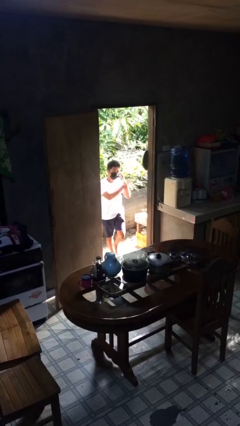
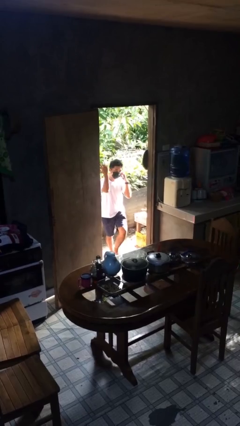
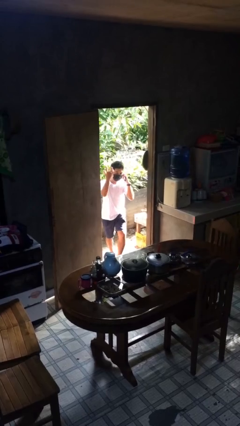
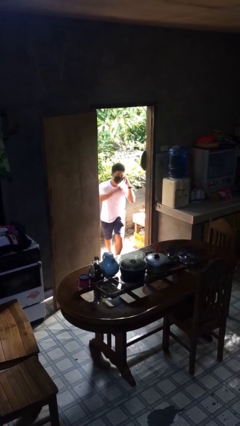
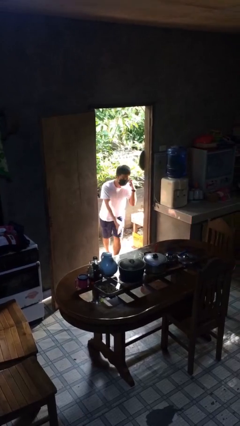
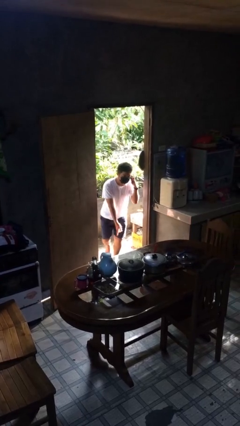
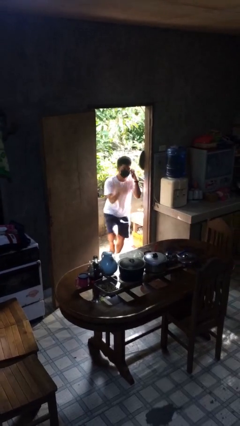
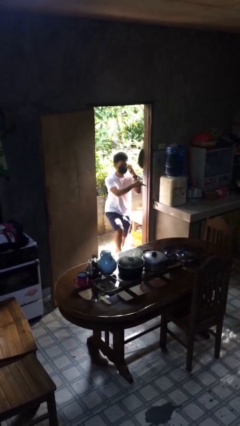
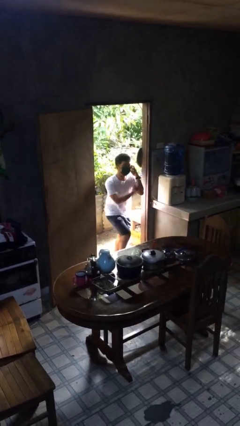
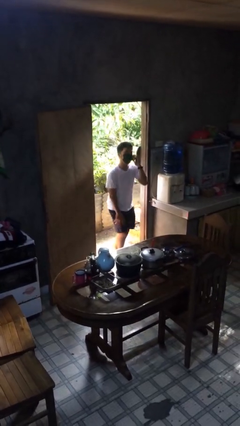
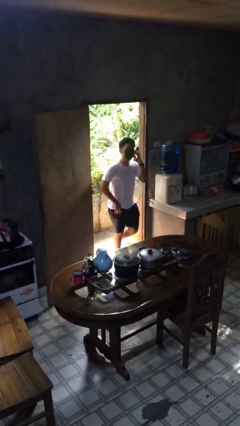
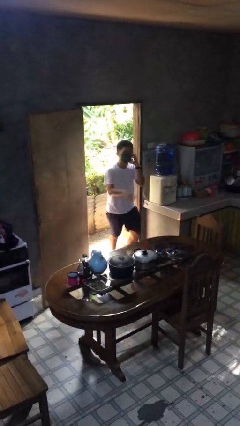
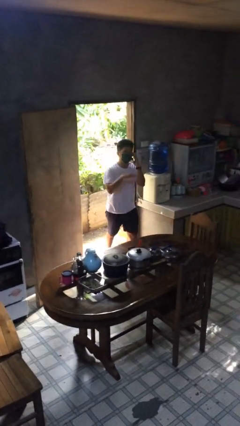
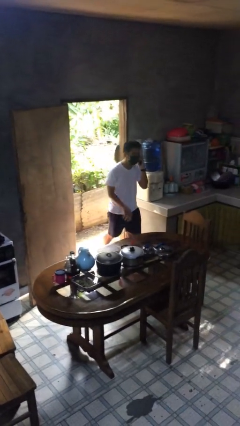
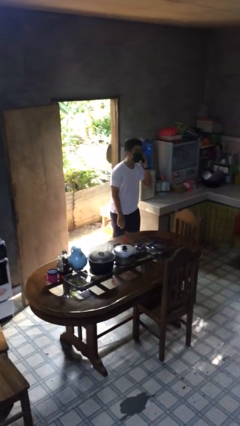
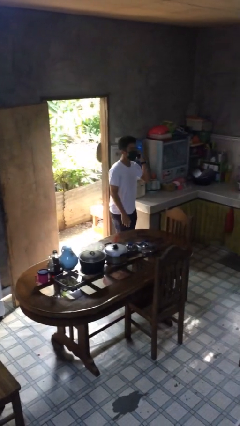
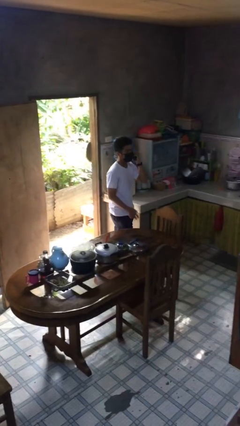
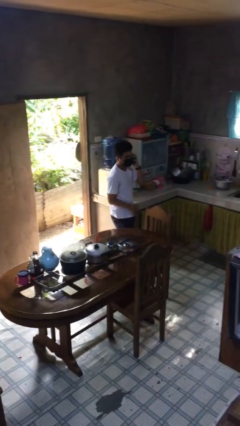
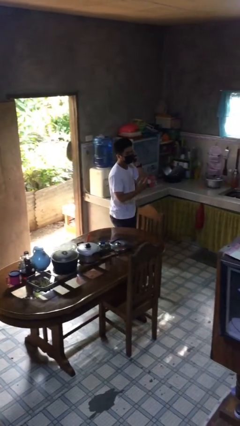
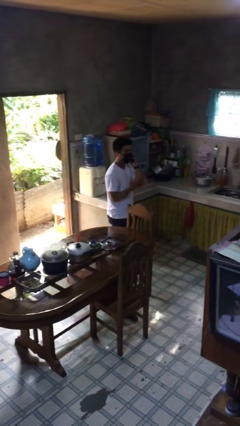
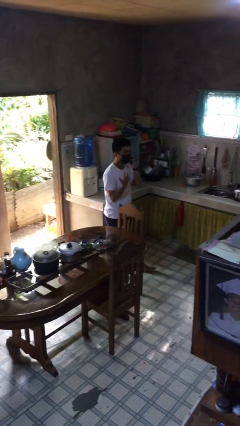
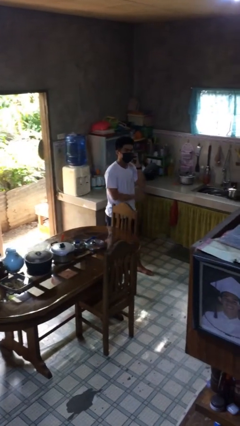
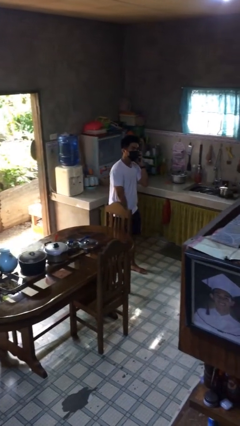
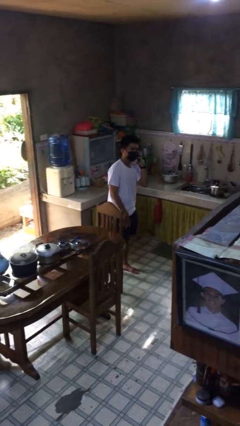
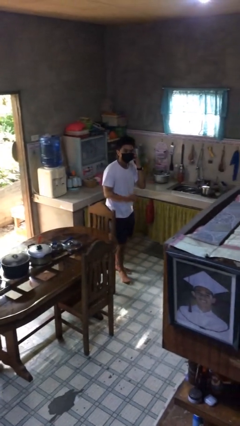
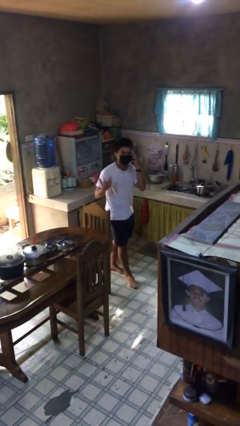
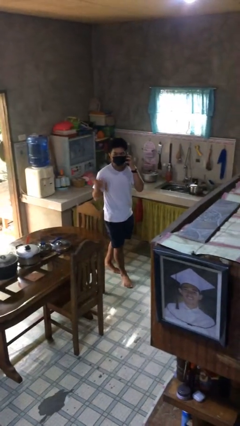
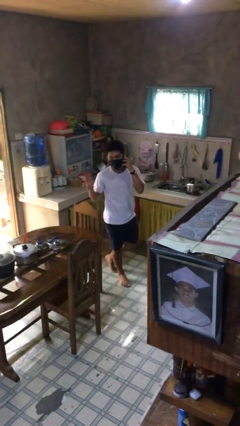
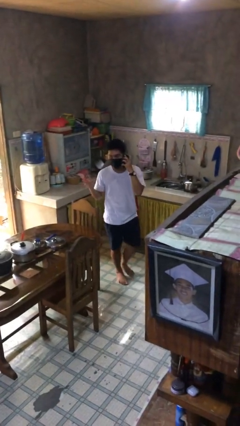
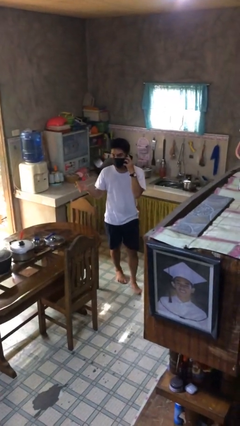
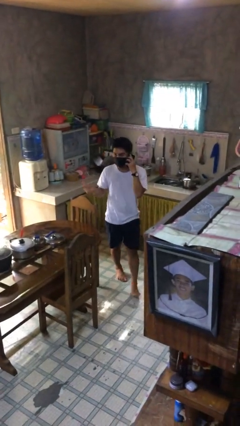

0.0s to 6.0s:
person enters scene through structure

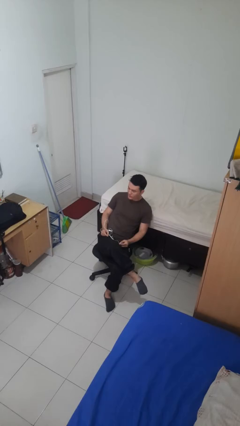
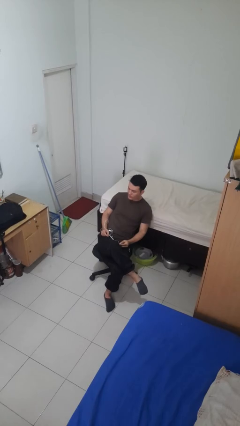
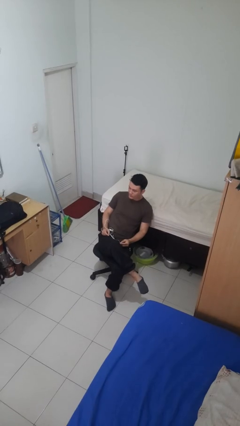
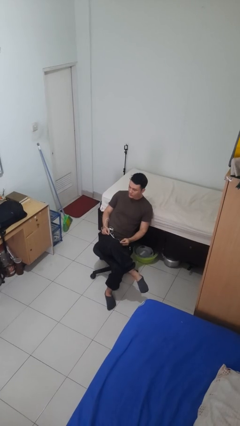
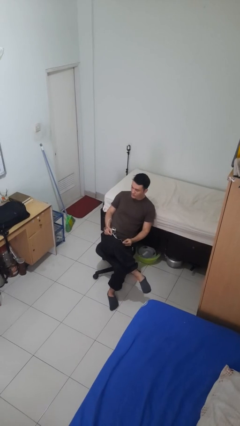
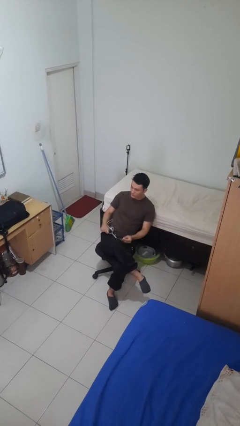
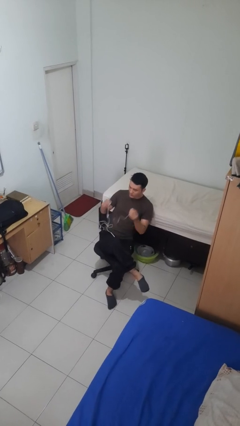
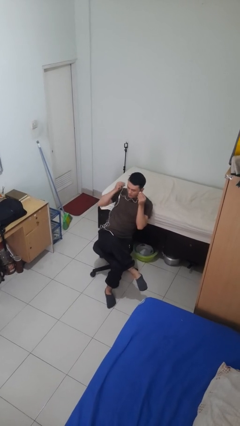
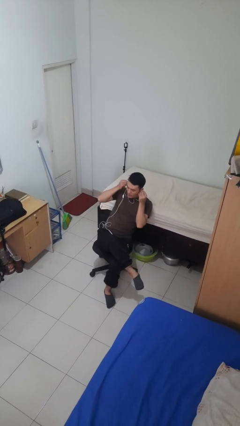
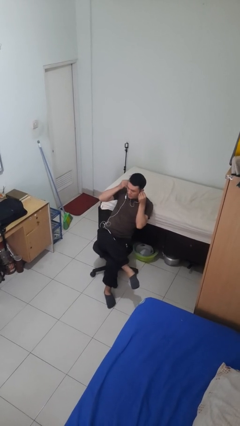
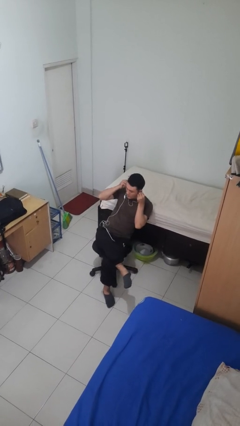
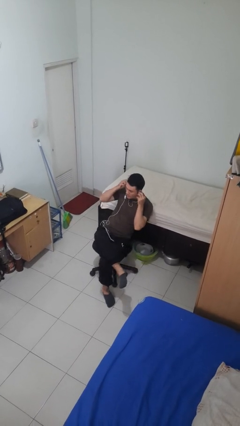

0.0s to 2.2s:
person puts on headphones

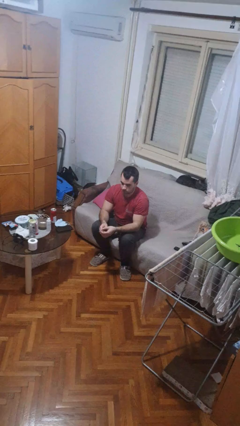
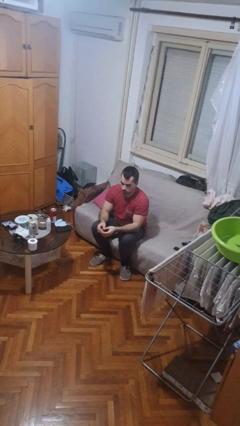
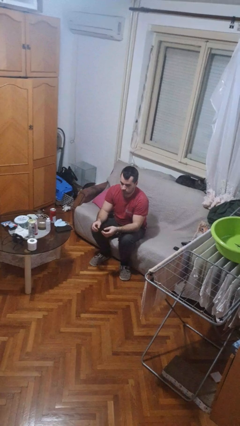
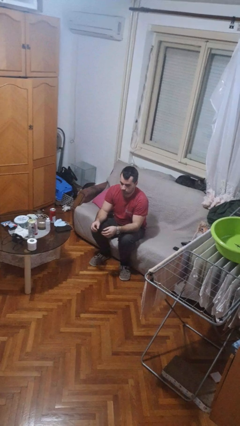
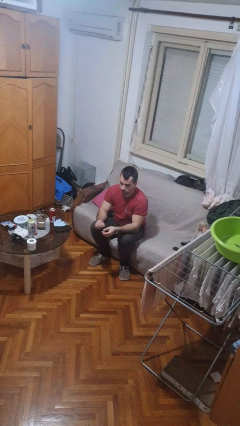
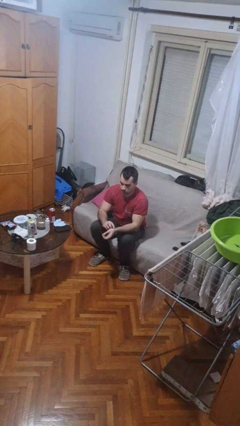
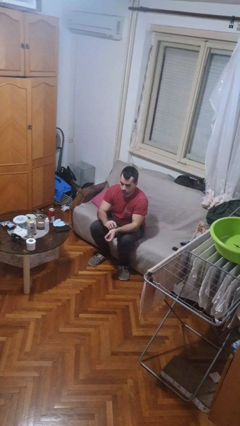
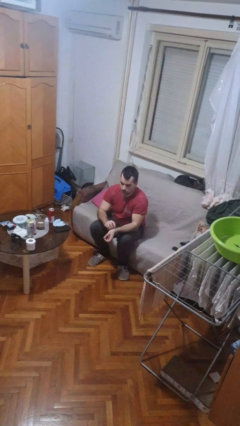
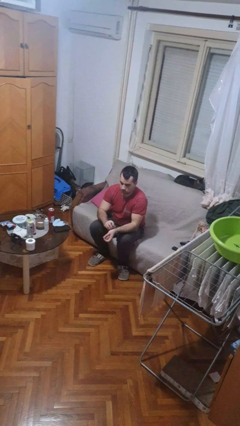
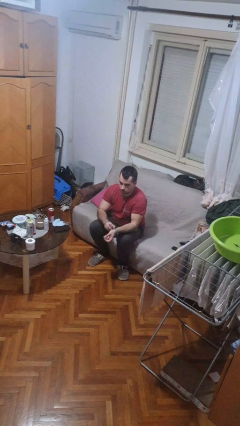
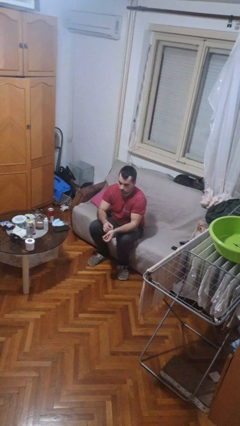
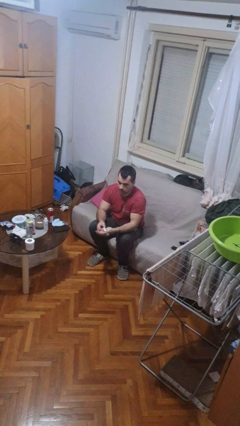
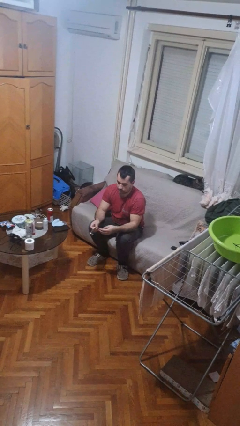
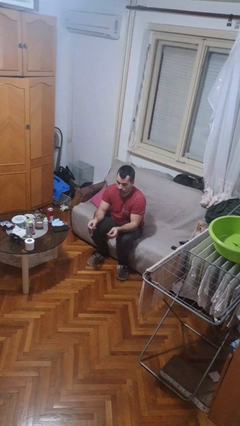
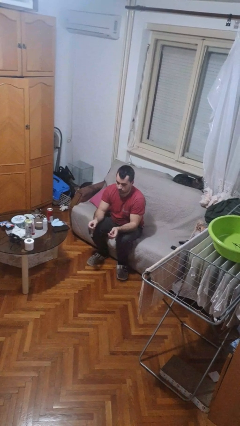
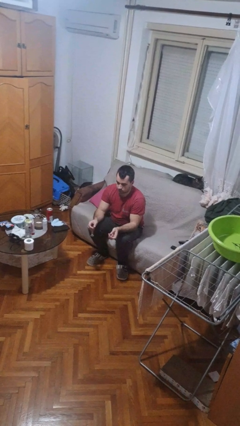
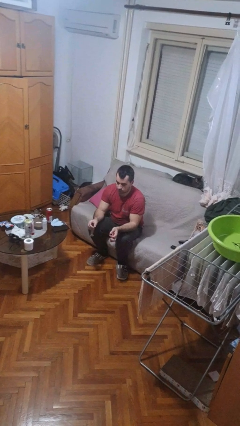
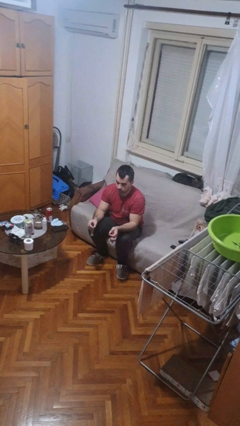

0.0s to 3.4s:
person takes off wristwatch

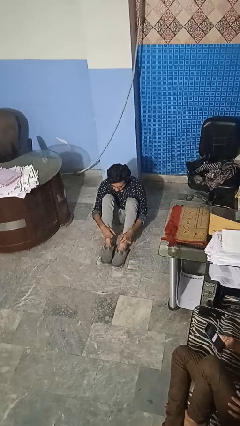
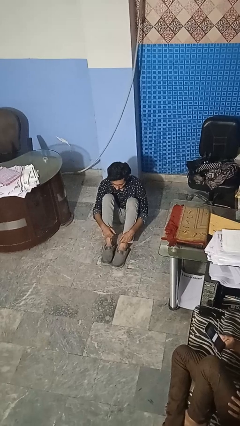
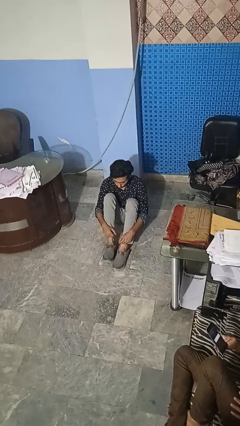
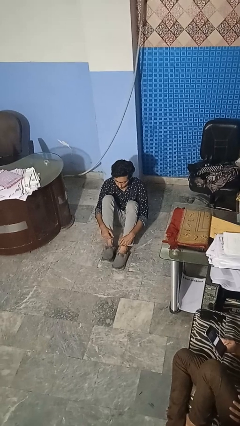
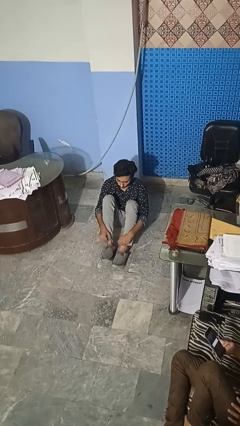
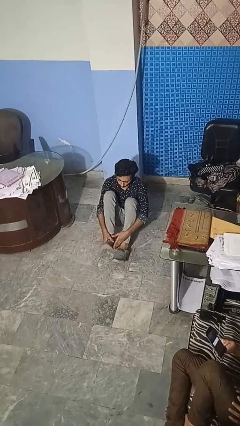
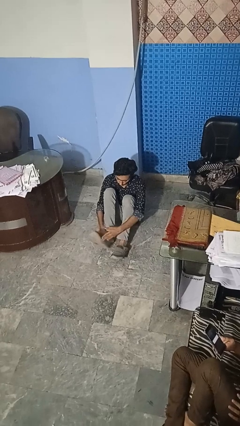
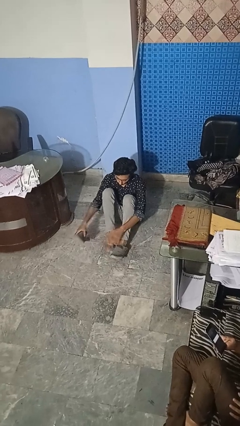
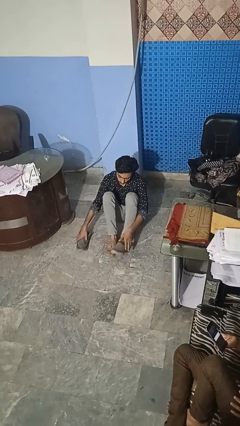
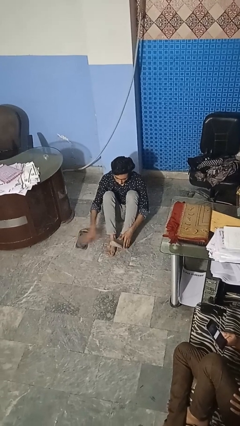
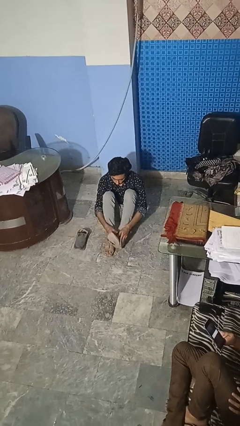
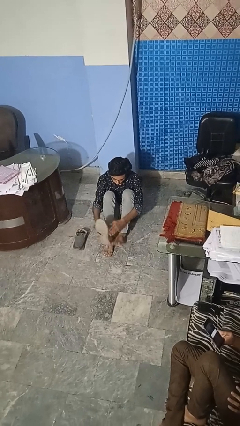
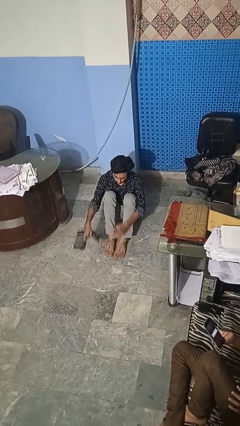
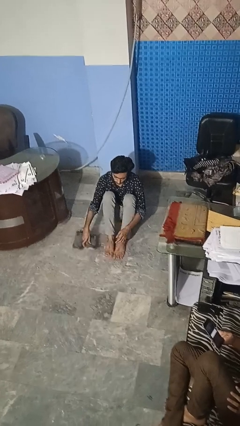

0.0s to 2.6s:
person takes off shoes

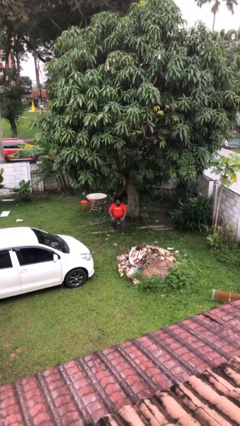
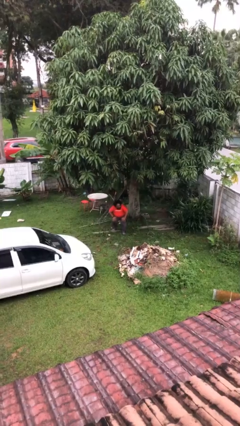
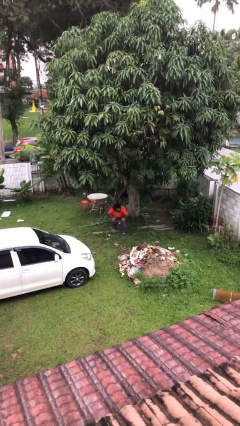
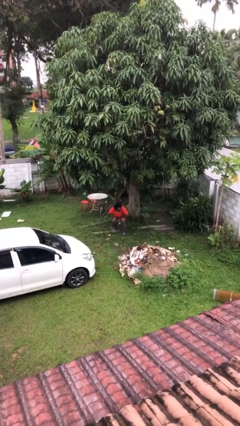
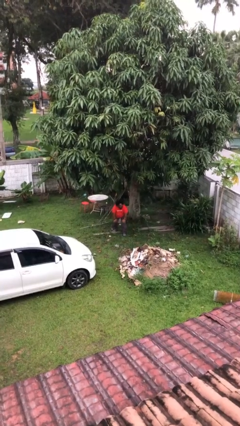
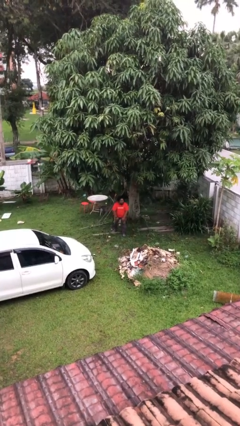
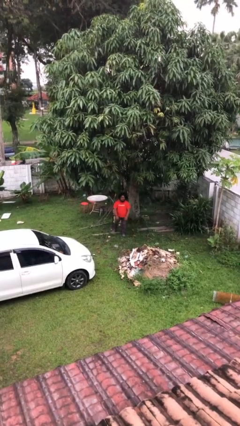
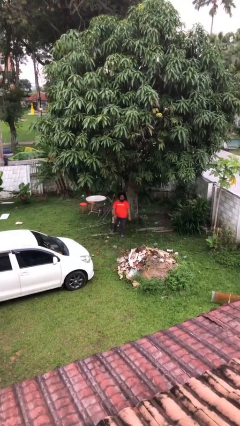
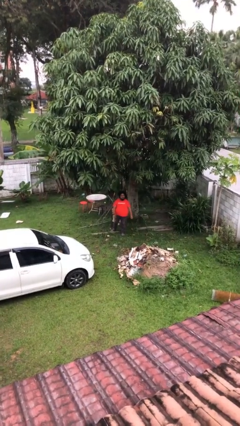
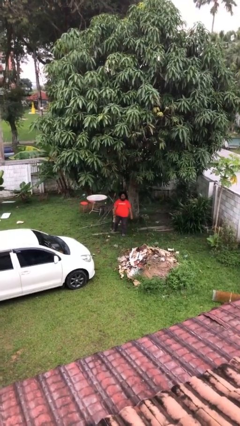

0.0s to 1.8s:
person stands up

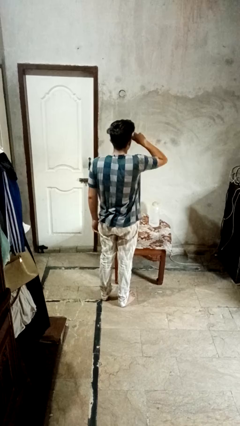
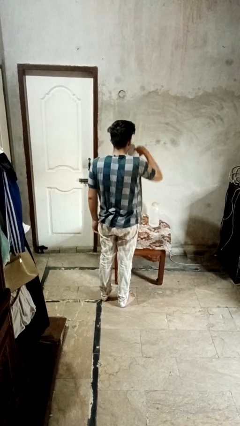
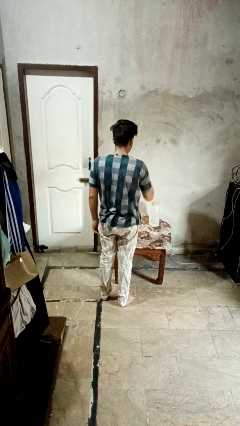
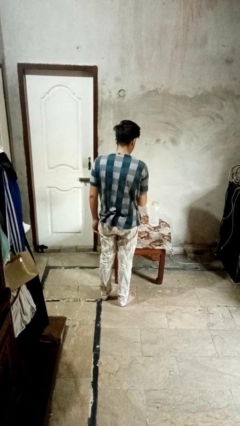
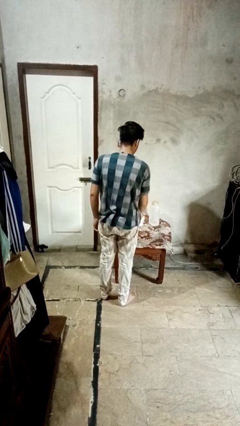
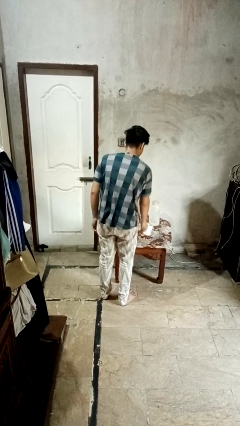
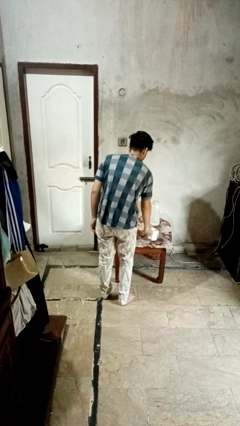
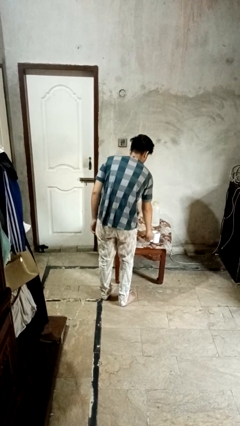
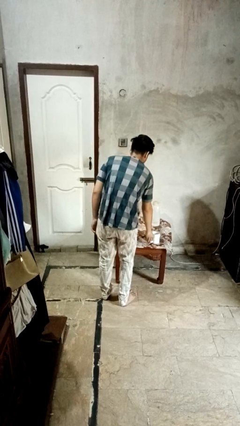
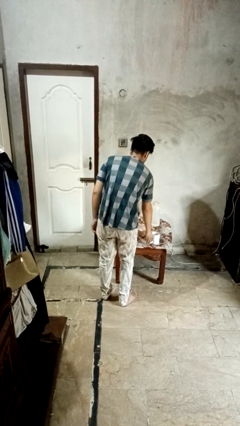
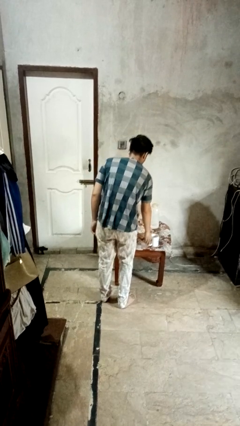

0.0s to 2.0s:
person puts down object on table
